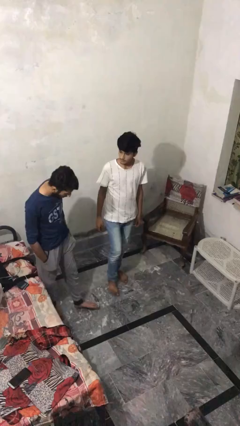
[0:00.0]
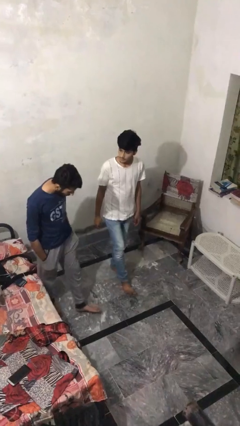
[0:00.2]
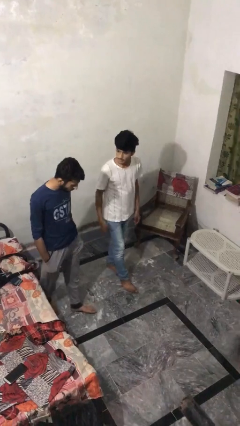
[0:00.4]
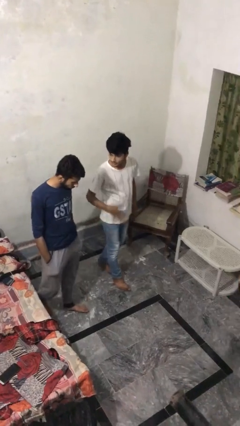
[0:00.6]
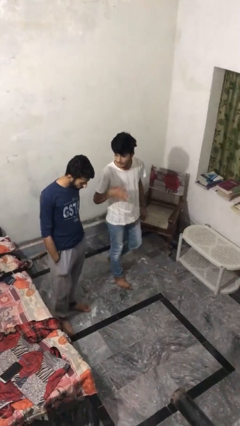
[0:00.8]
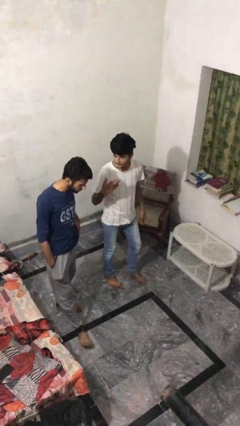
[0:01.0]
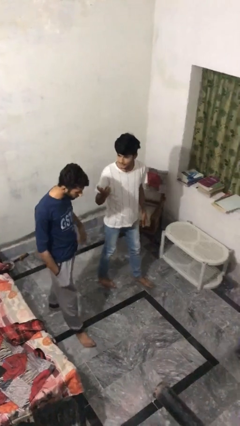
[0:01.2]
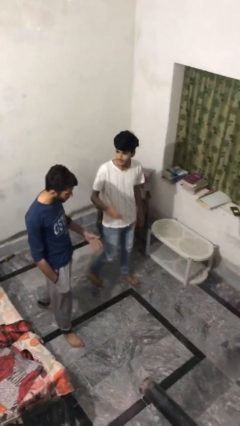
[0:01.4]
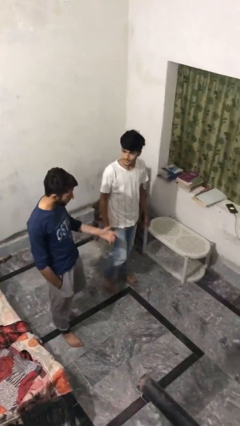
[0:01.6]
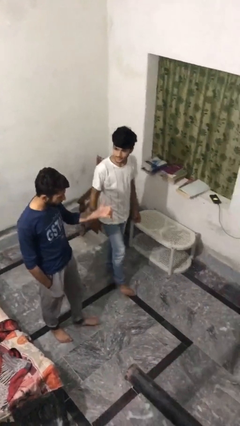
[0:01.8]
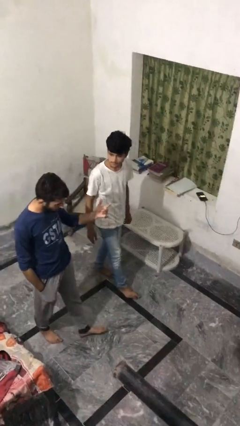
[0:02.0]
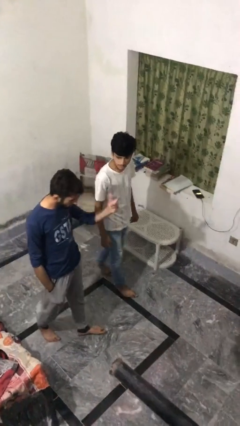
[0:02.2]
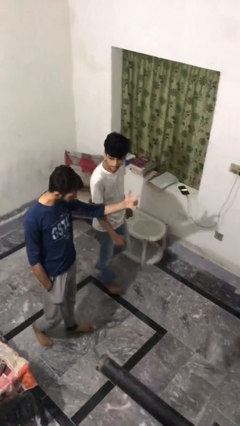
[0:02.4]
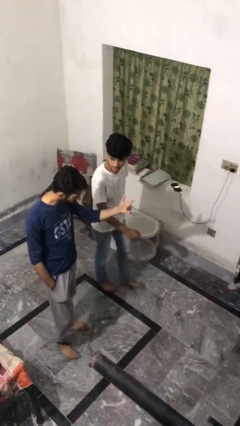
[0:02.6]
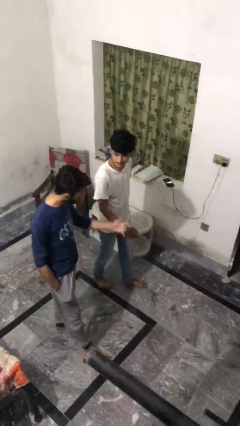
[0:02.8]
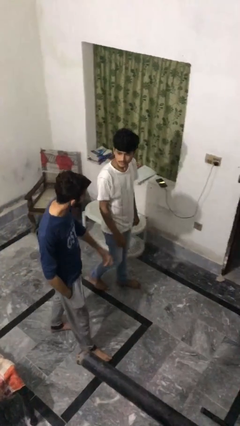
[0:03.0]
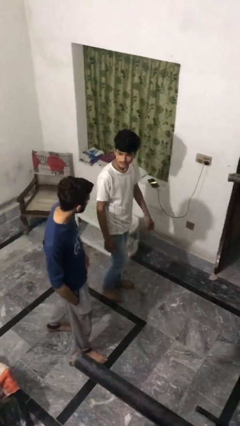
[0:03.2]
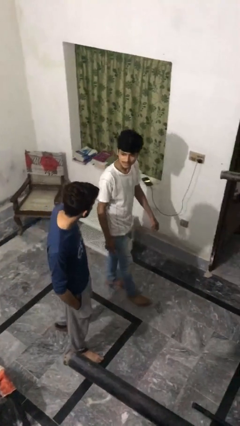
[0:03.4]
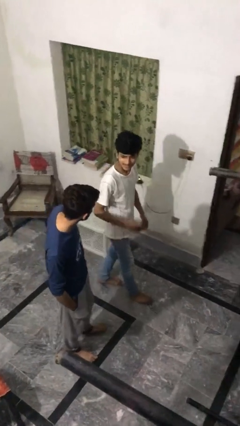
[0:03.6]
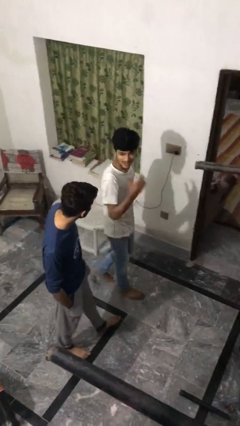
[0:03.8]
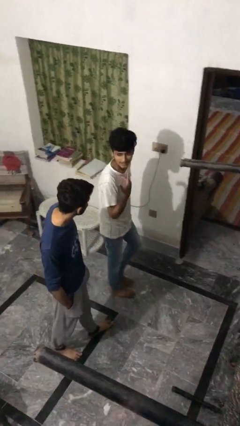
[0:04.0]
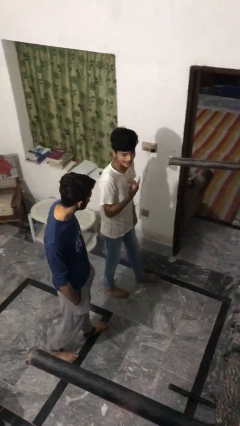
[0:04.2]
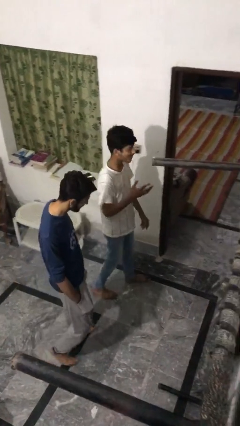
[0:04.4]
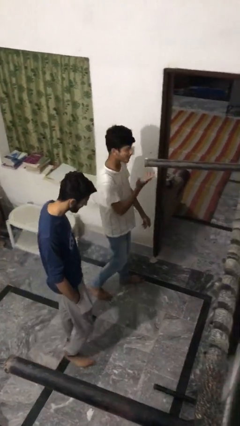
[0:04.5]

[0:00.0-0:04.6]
person talks to person

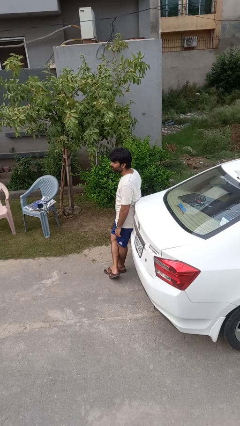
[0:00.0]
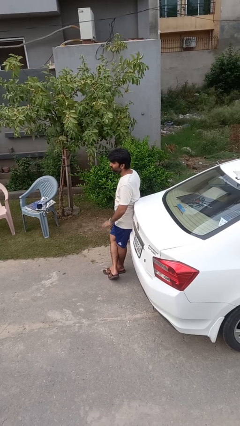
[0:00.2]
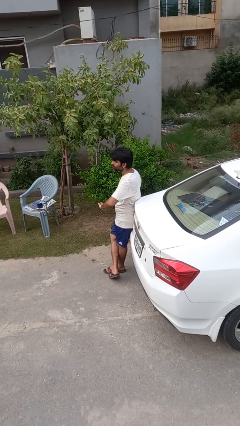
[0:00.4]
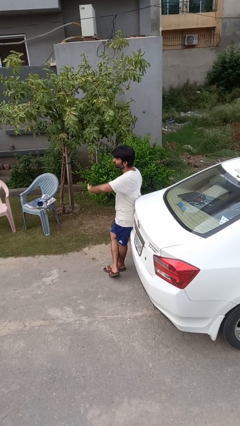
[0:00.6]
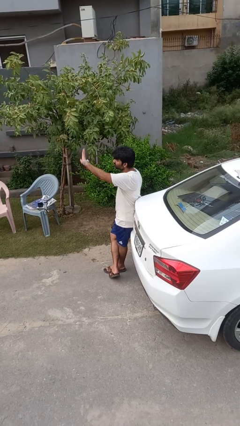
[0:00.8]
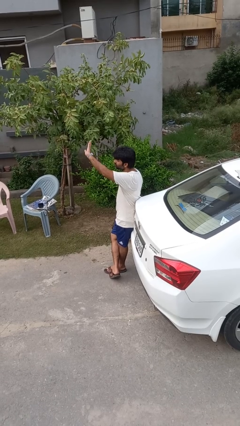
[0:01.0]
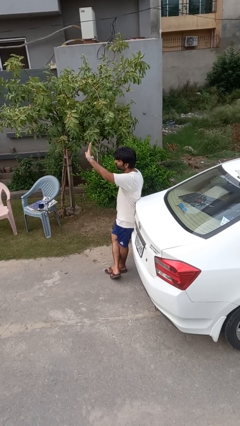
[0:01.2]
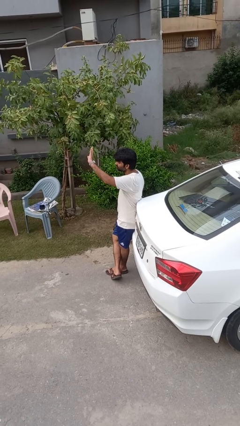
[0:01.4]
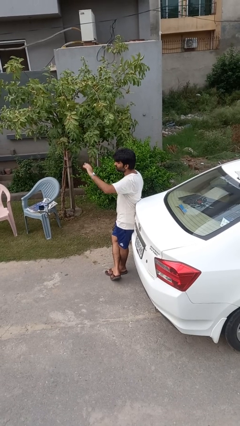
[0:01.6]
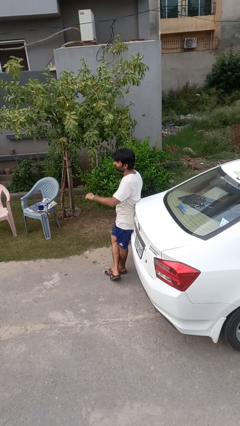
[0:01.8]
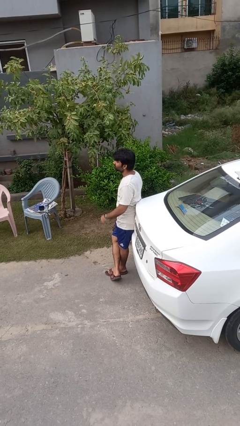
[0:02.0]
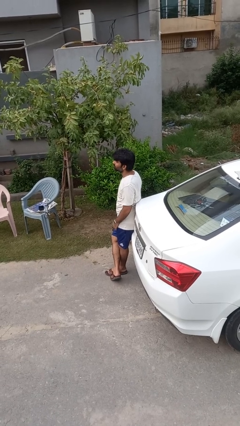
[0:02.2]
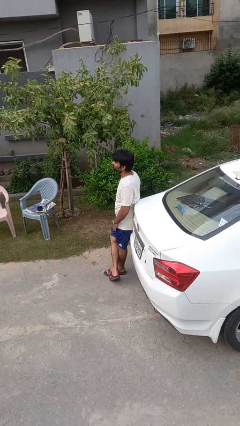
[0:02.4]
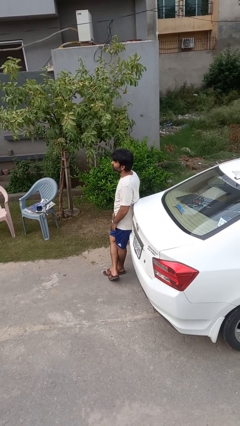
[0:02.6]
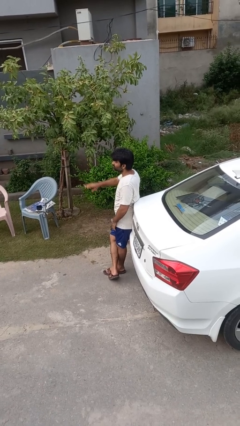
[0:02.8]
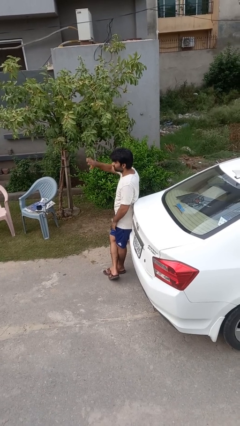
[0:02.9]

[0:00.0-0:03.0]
person gestures swipe up

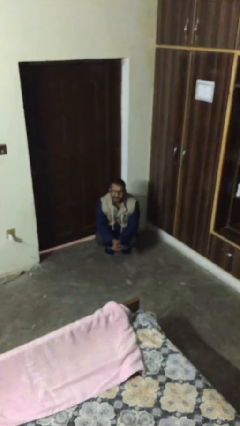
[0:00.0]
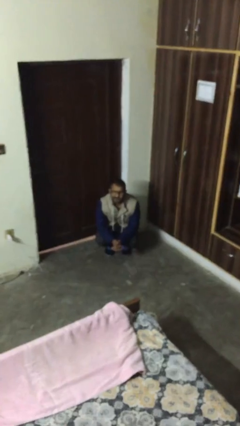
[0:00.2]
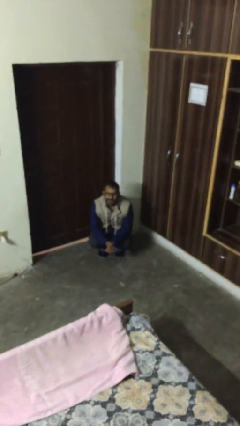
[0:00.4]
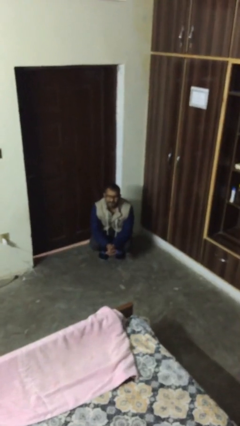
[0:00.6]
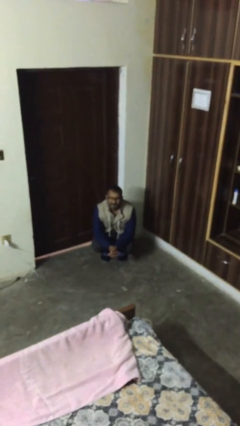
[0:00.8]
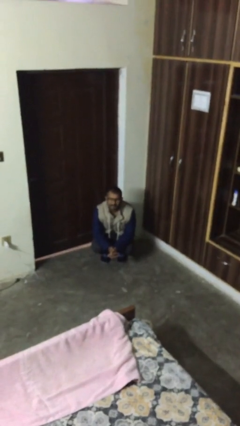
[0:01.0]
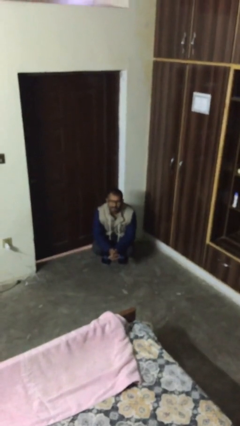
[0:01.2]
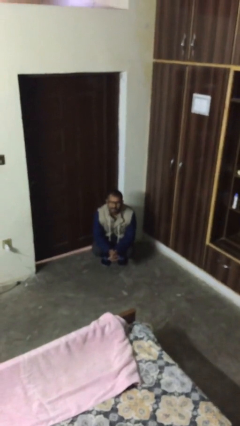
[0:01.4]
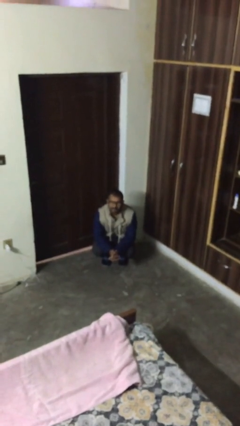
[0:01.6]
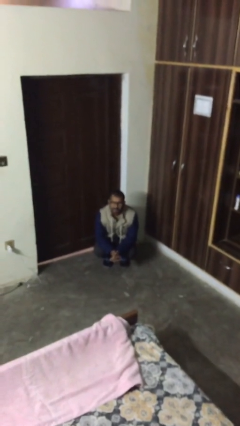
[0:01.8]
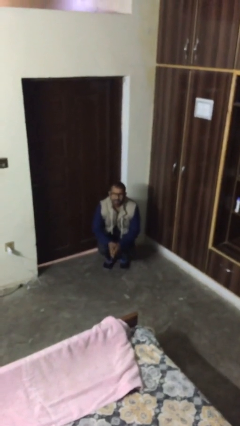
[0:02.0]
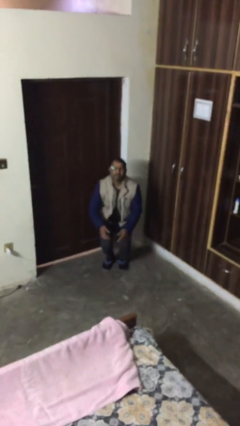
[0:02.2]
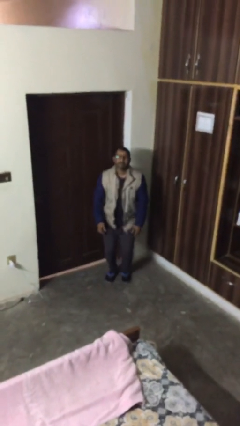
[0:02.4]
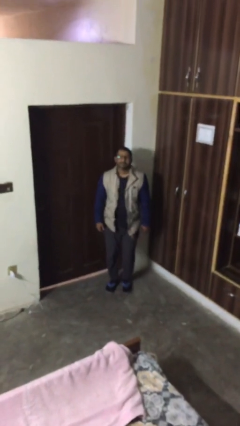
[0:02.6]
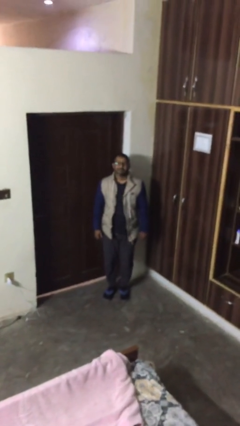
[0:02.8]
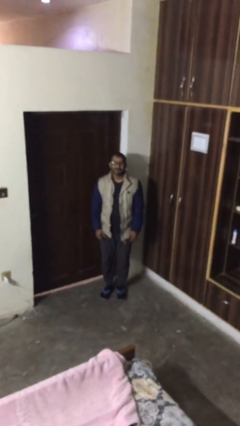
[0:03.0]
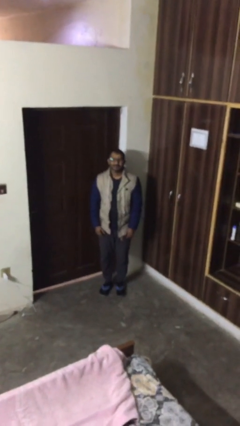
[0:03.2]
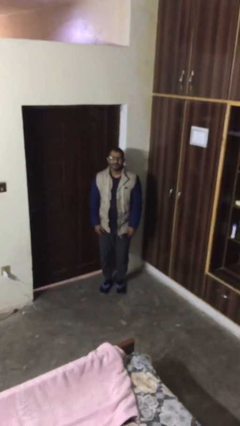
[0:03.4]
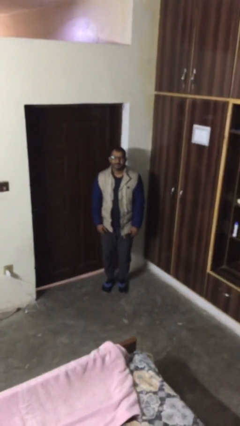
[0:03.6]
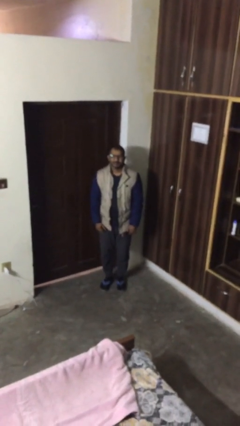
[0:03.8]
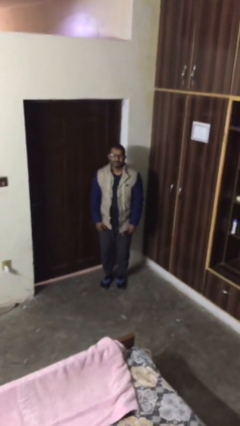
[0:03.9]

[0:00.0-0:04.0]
person stands up

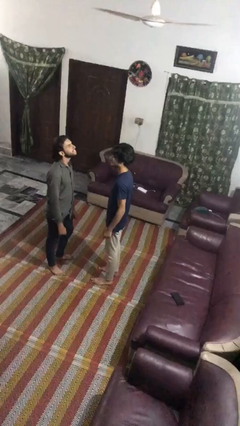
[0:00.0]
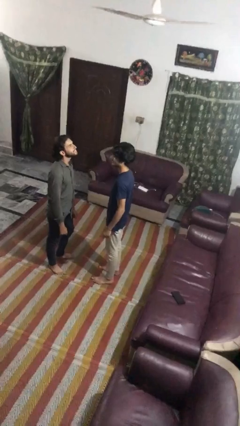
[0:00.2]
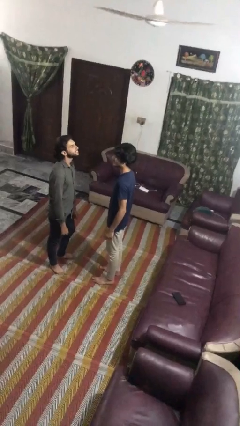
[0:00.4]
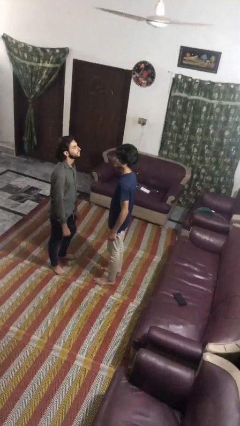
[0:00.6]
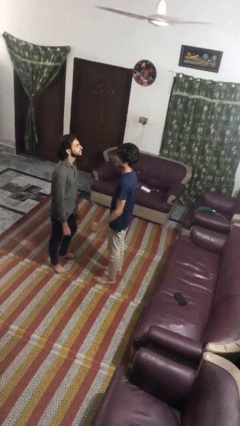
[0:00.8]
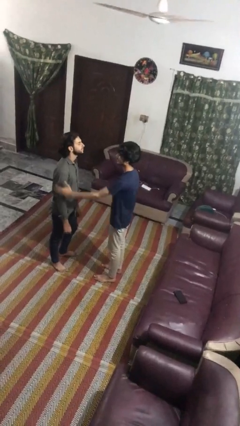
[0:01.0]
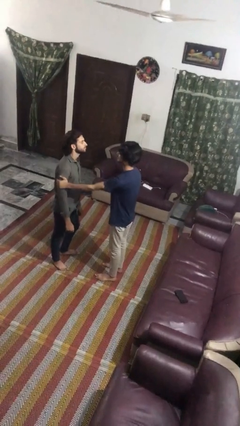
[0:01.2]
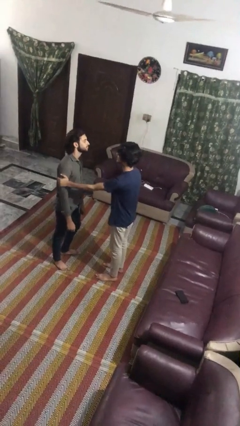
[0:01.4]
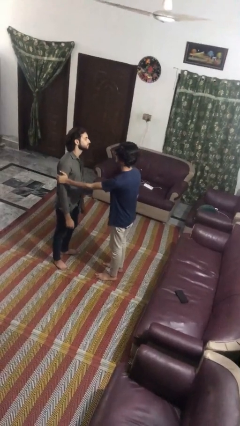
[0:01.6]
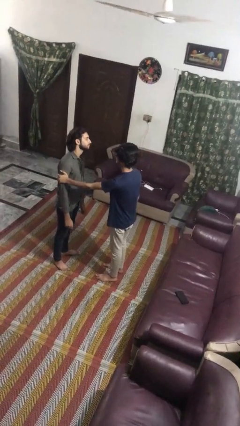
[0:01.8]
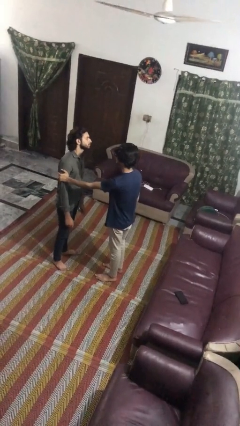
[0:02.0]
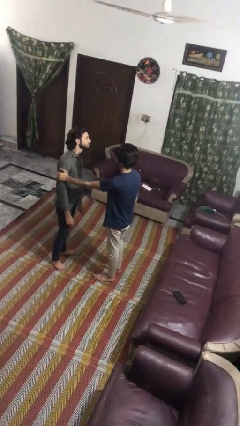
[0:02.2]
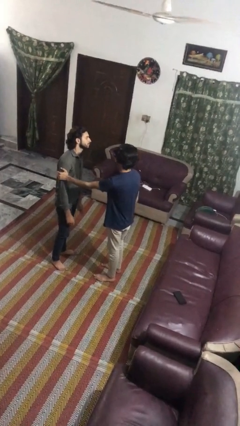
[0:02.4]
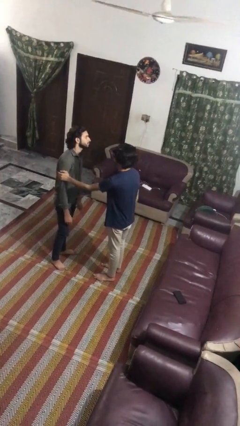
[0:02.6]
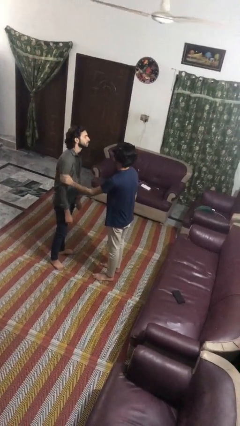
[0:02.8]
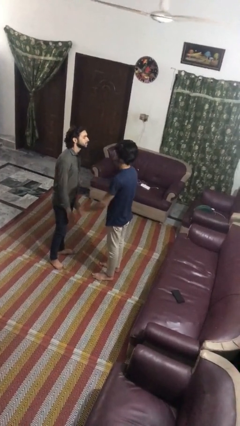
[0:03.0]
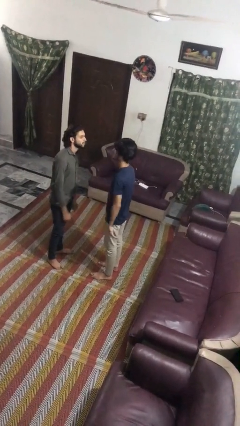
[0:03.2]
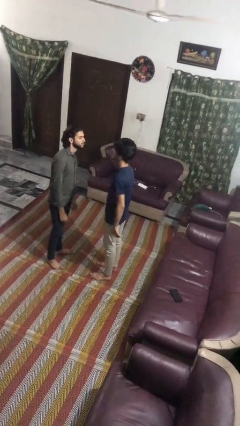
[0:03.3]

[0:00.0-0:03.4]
person grabs person by bicep

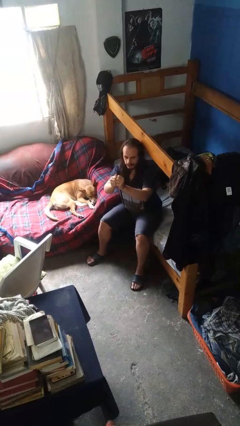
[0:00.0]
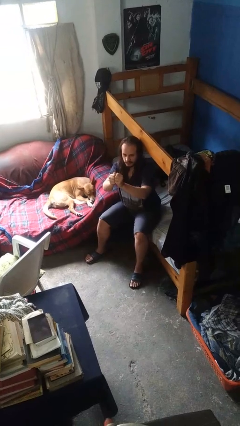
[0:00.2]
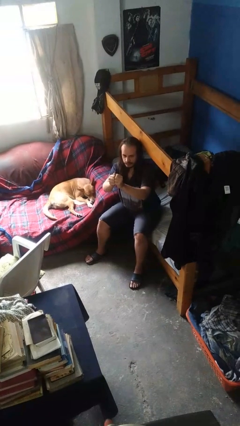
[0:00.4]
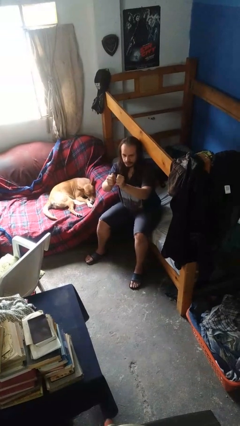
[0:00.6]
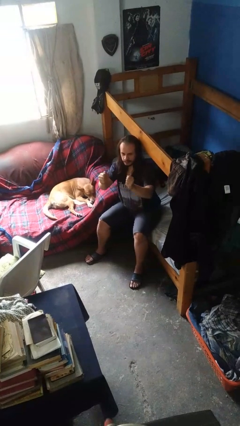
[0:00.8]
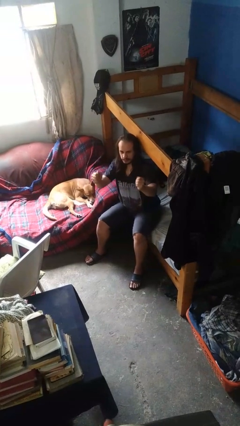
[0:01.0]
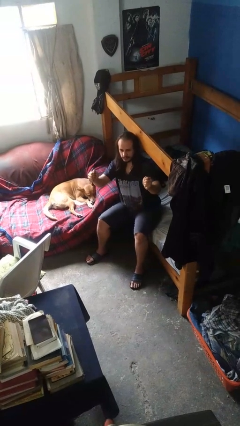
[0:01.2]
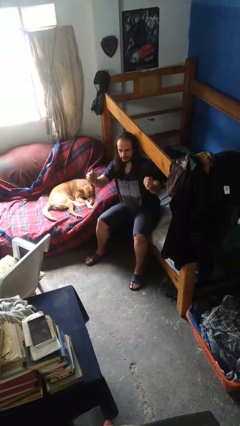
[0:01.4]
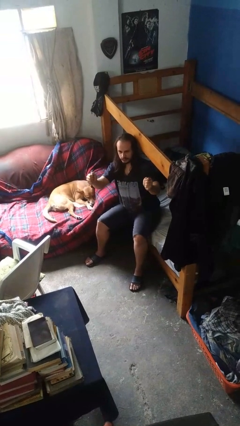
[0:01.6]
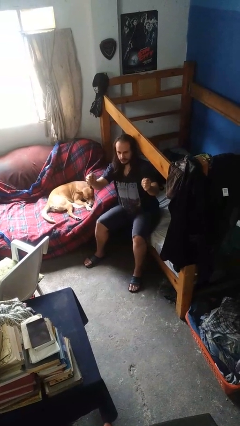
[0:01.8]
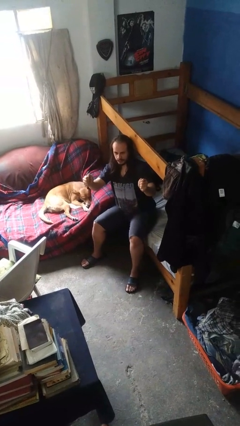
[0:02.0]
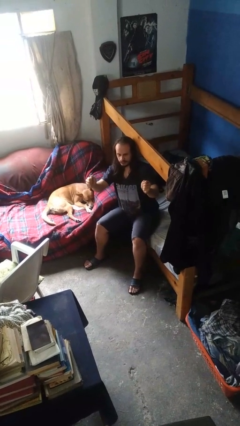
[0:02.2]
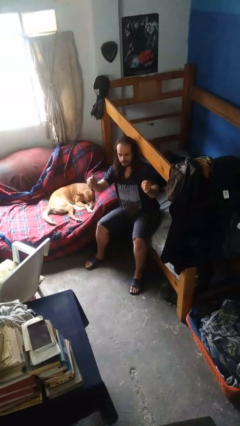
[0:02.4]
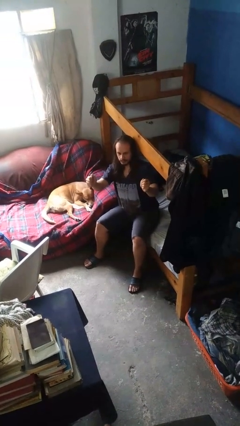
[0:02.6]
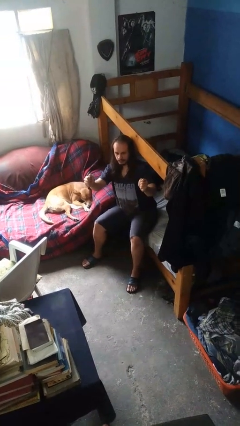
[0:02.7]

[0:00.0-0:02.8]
person gestures zoom in
